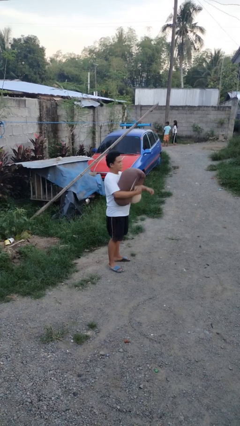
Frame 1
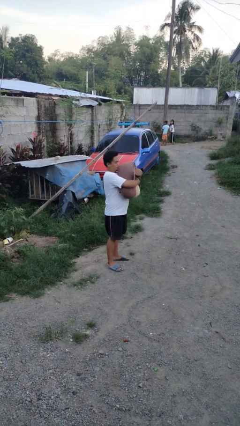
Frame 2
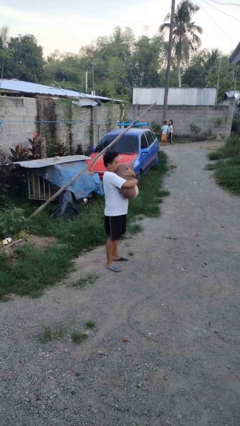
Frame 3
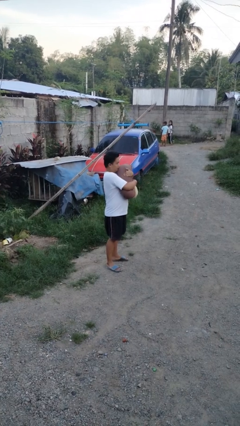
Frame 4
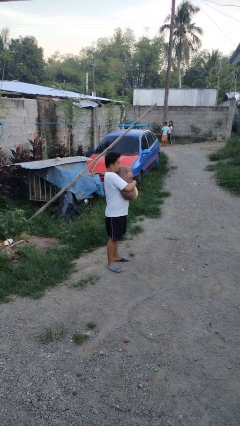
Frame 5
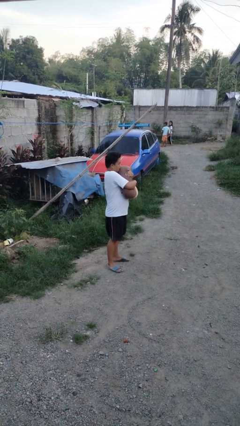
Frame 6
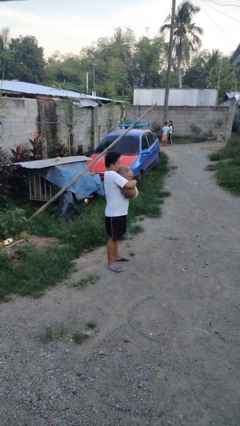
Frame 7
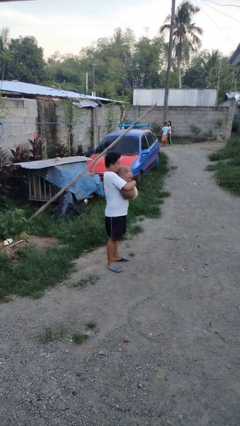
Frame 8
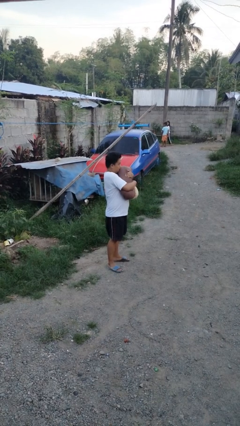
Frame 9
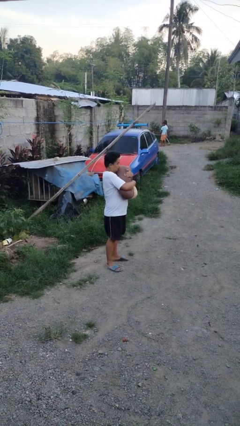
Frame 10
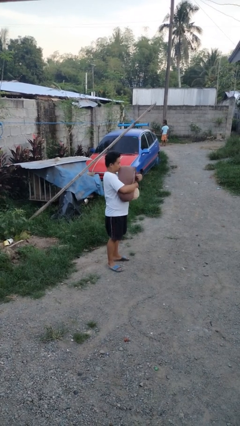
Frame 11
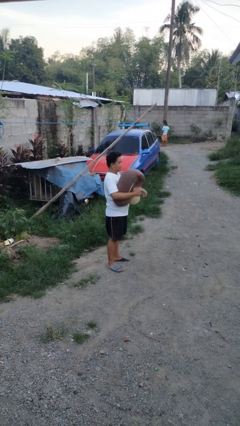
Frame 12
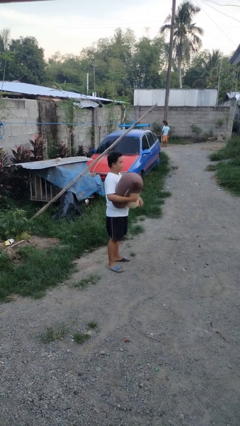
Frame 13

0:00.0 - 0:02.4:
person squeezes object

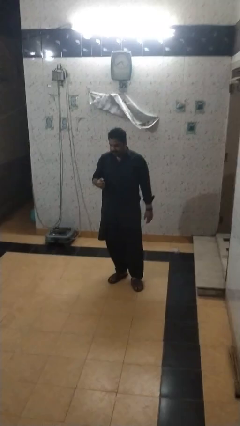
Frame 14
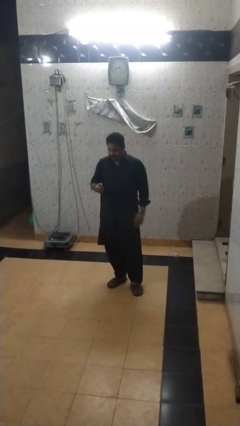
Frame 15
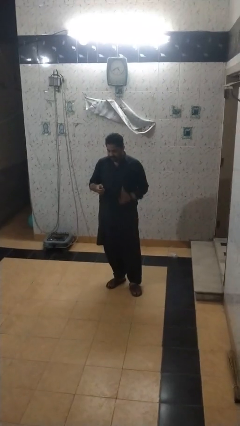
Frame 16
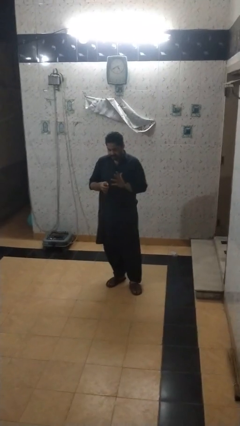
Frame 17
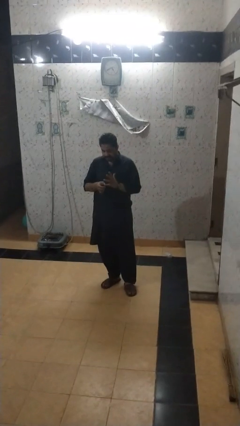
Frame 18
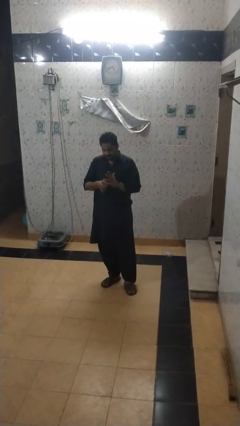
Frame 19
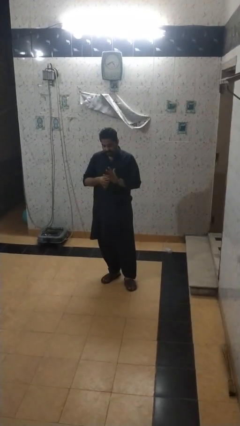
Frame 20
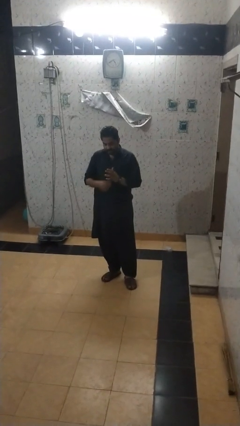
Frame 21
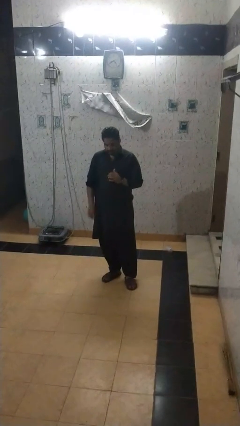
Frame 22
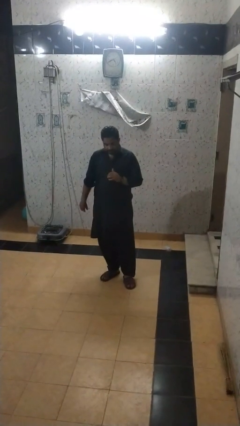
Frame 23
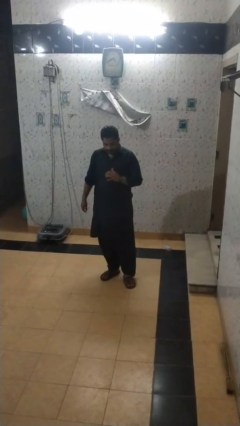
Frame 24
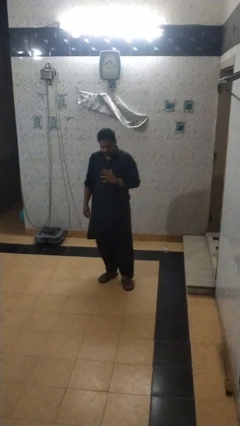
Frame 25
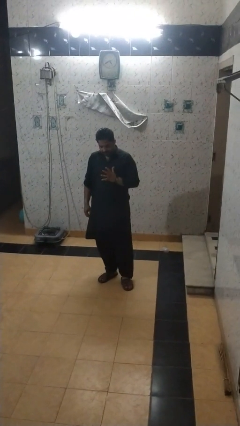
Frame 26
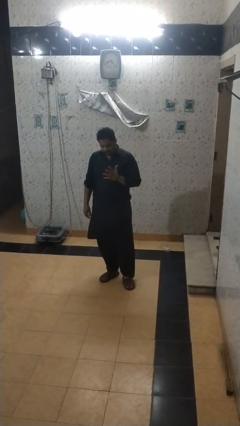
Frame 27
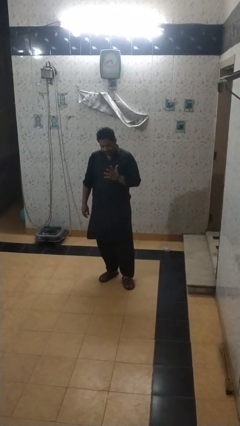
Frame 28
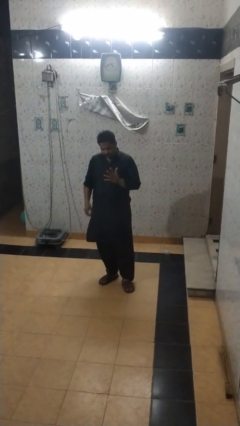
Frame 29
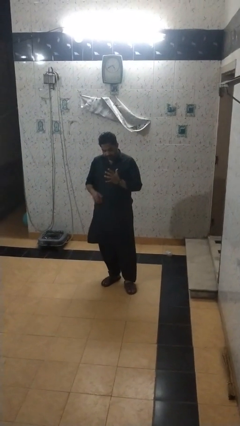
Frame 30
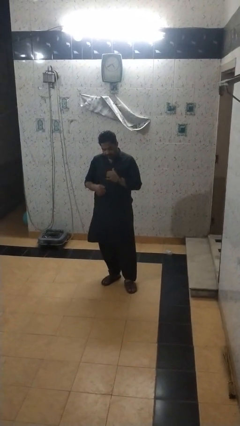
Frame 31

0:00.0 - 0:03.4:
person puts on ring

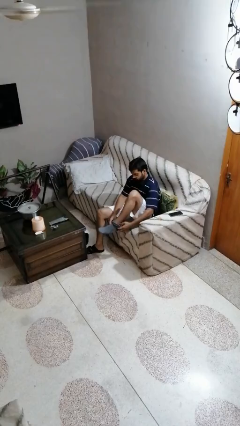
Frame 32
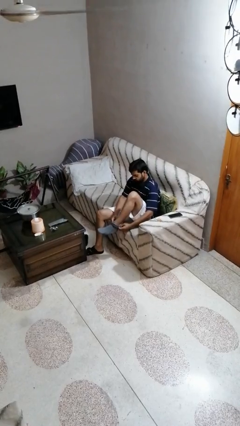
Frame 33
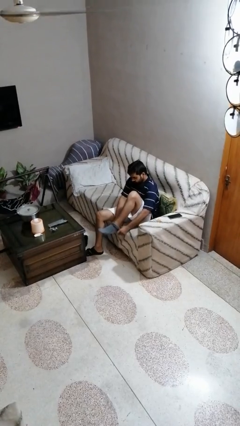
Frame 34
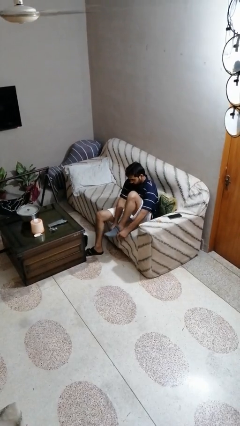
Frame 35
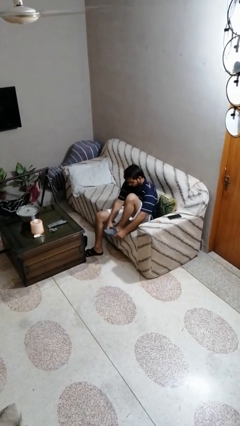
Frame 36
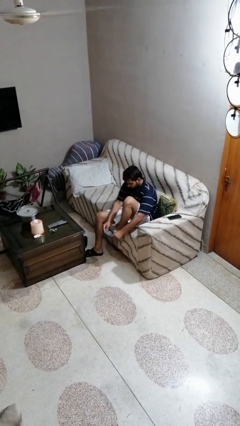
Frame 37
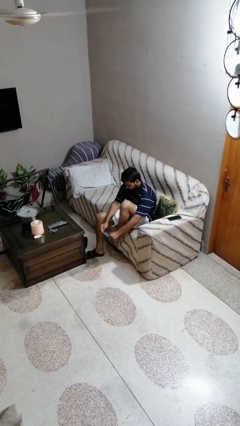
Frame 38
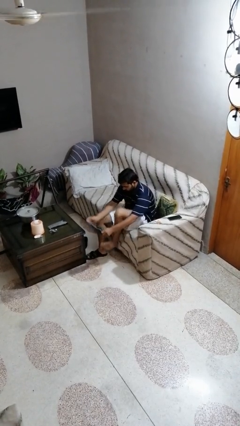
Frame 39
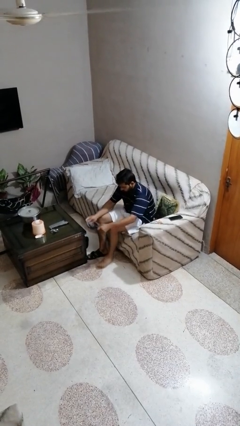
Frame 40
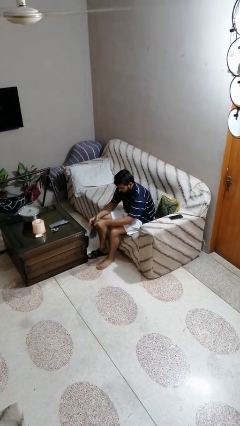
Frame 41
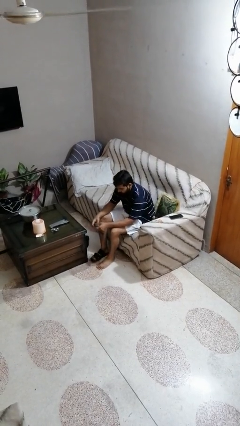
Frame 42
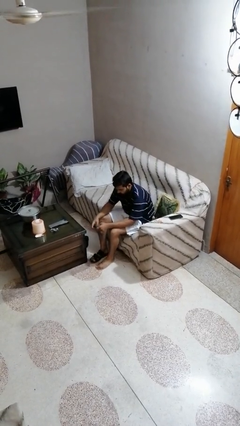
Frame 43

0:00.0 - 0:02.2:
person takes off socks

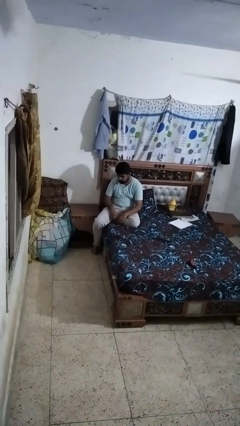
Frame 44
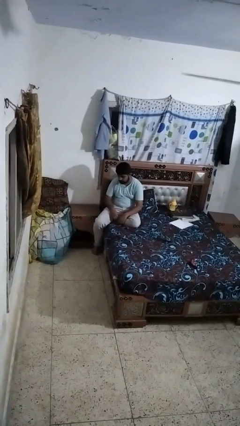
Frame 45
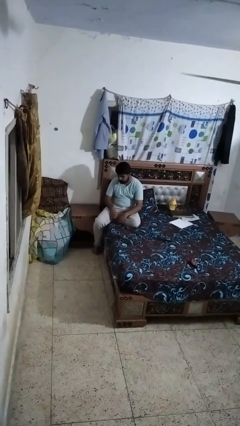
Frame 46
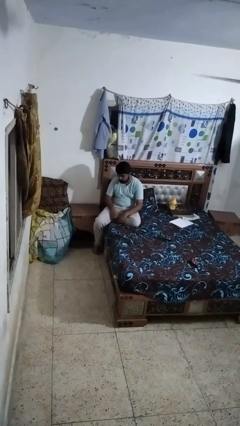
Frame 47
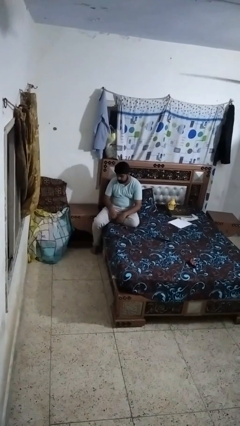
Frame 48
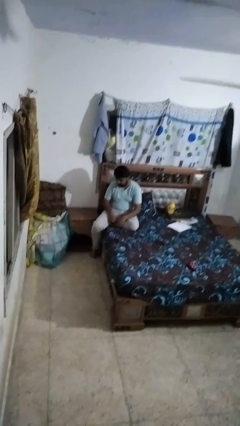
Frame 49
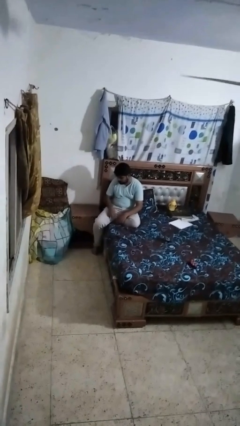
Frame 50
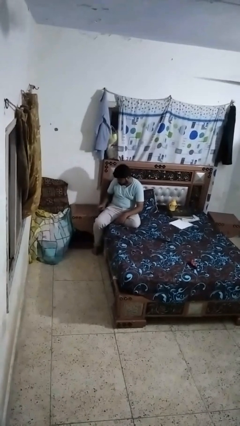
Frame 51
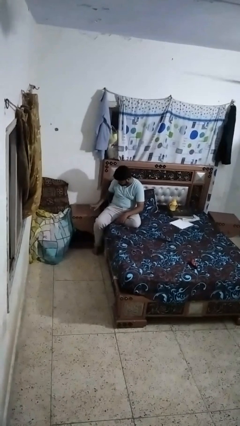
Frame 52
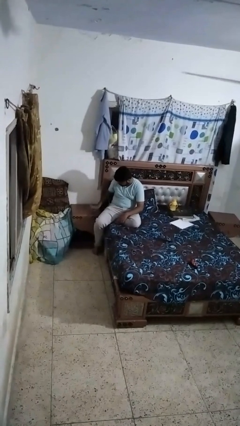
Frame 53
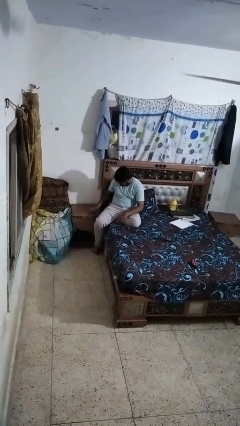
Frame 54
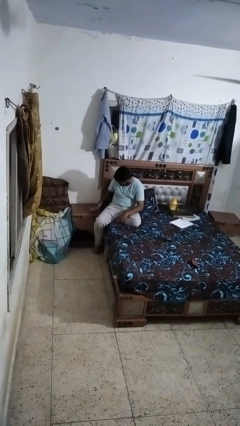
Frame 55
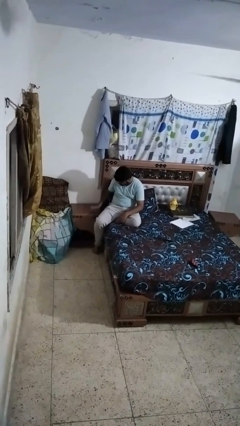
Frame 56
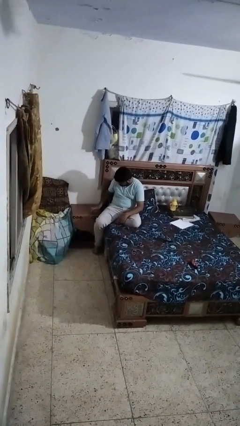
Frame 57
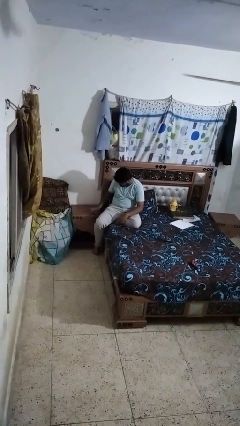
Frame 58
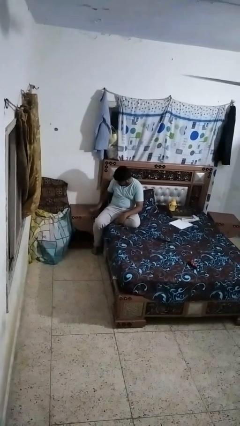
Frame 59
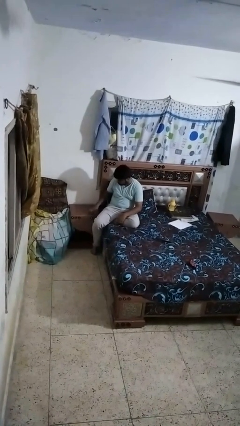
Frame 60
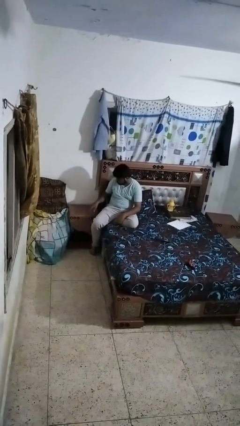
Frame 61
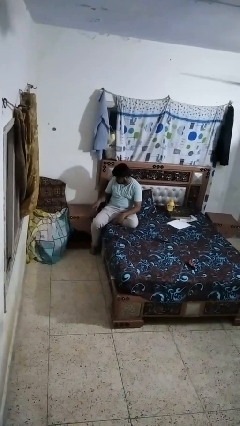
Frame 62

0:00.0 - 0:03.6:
person taps object with finger

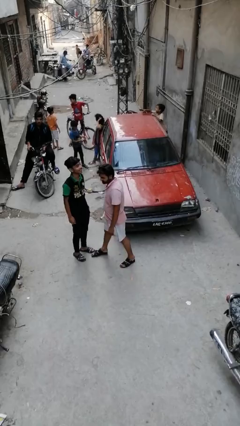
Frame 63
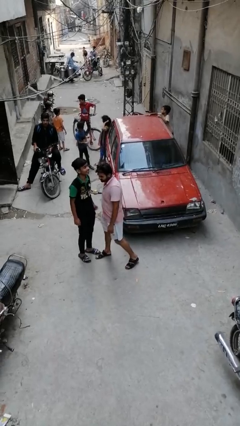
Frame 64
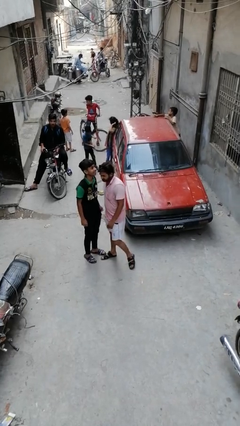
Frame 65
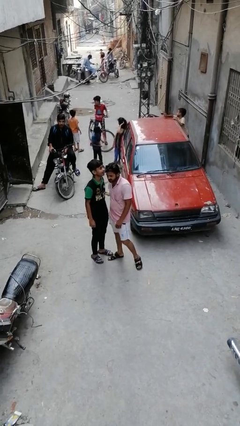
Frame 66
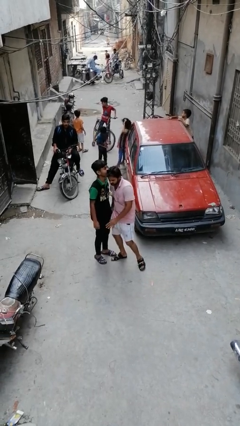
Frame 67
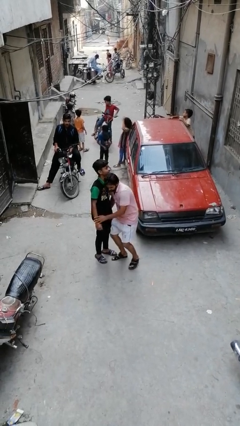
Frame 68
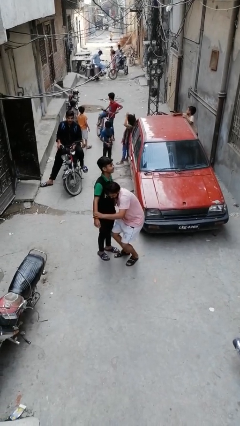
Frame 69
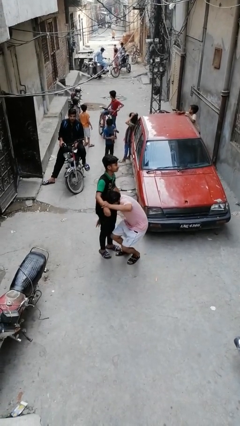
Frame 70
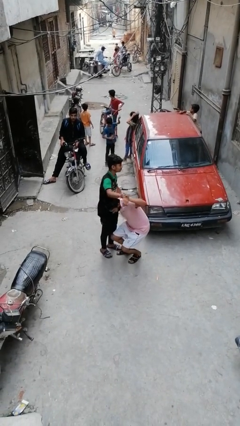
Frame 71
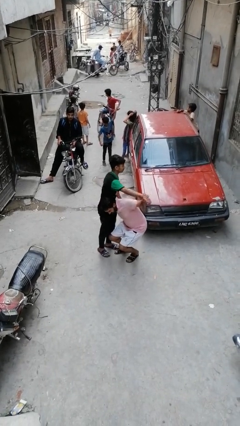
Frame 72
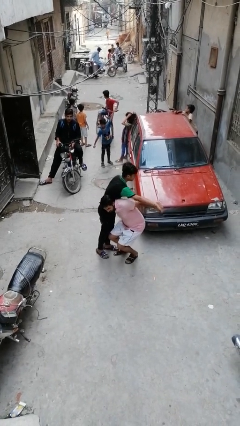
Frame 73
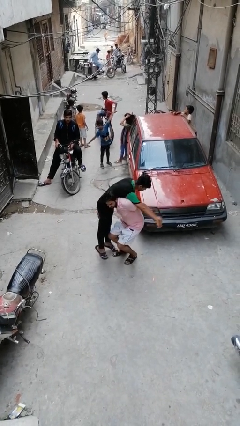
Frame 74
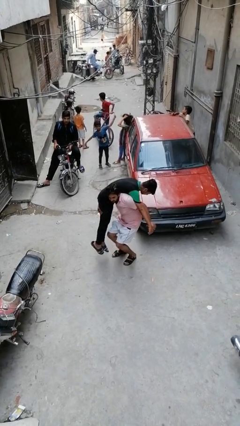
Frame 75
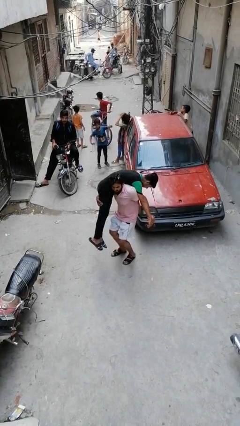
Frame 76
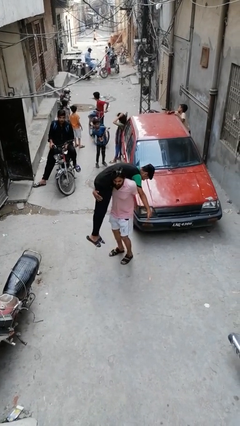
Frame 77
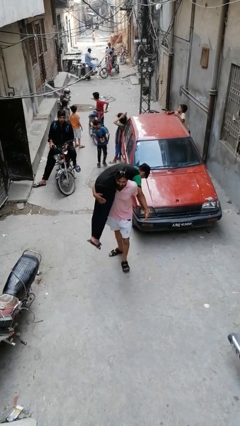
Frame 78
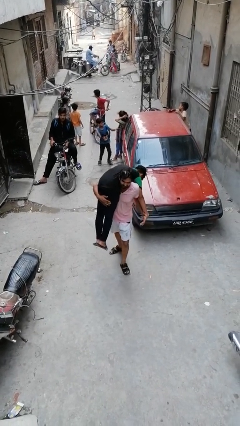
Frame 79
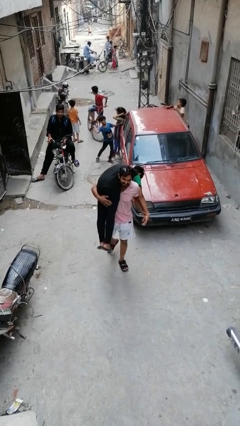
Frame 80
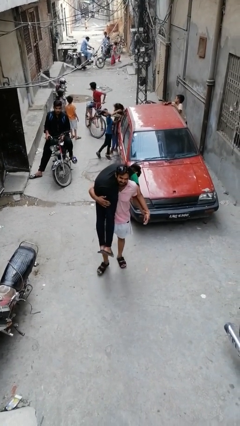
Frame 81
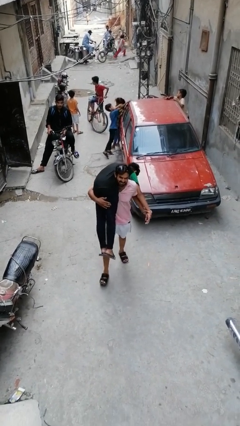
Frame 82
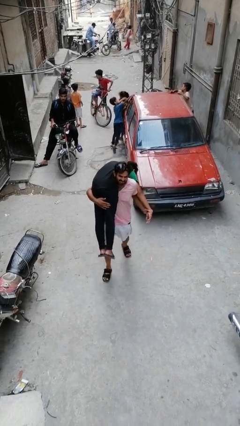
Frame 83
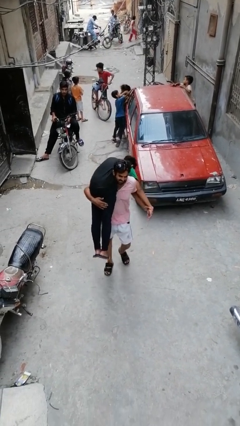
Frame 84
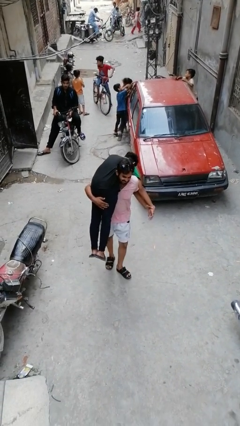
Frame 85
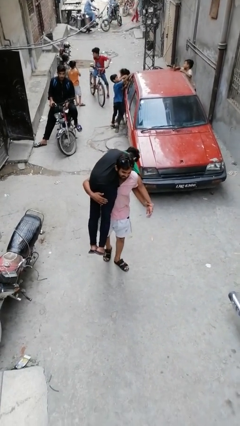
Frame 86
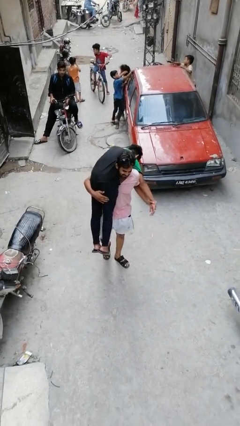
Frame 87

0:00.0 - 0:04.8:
person carries person over shoulder

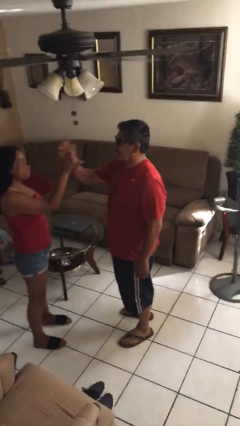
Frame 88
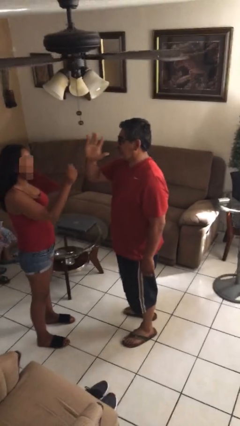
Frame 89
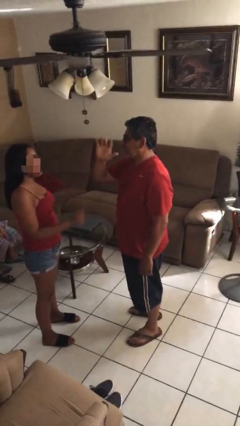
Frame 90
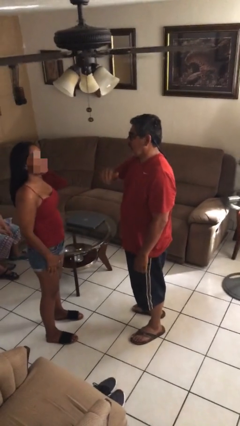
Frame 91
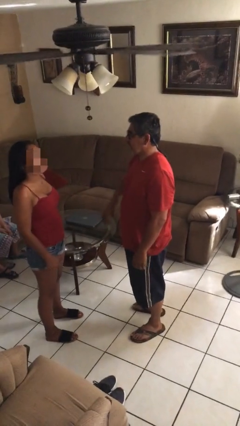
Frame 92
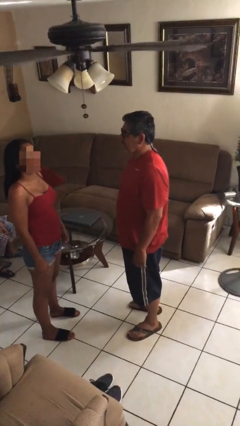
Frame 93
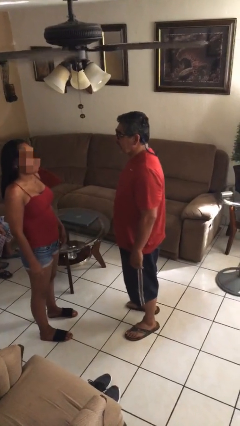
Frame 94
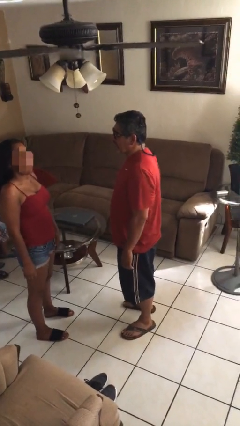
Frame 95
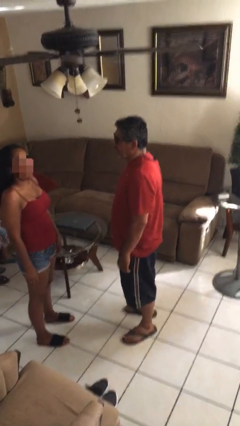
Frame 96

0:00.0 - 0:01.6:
person highfives hand
